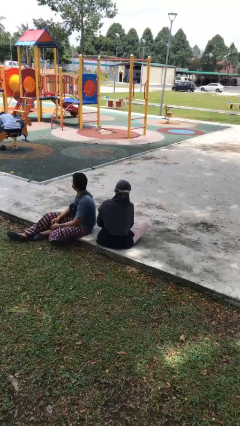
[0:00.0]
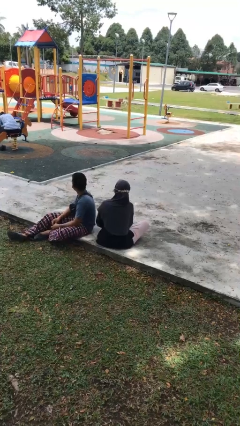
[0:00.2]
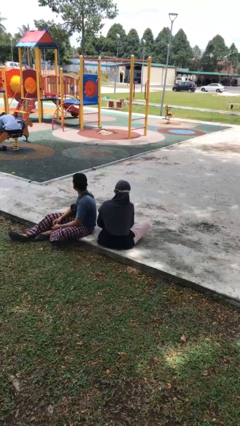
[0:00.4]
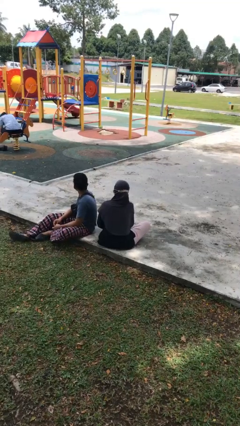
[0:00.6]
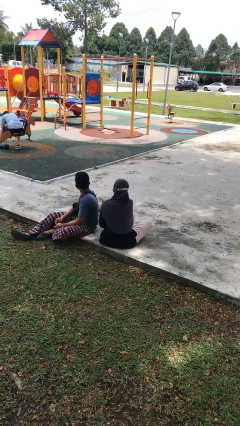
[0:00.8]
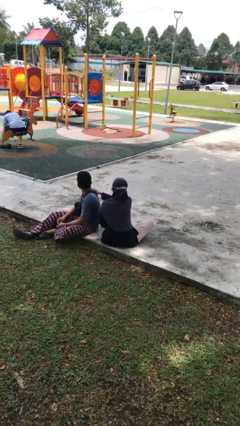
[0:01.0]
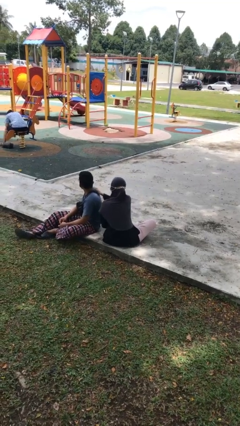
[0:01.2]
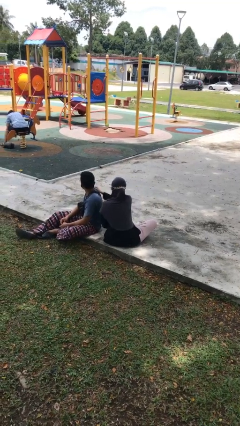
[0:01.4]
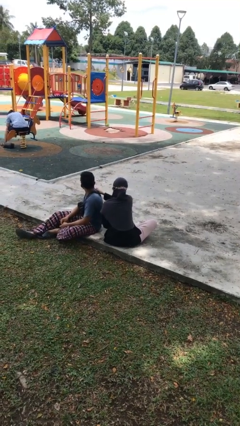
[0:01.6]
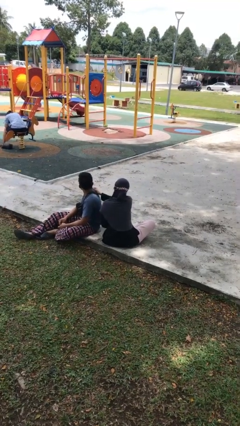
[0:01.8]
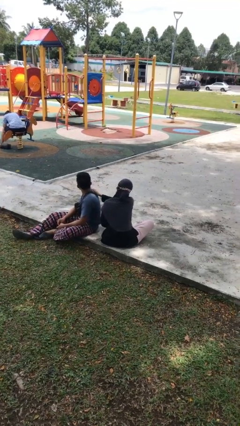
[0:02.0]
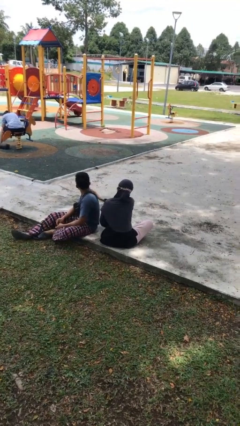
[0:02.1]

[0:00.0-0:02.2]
person pounds shoulders of person

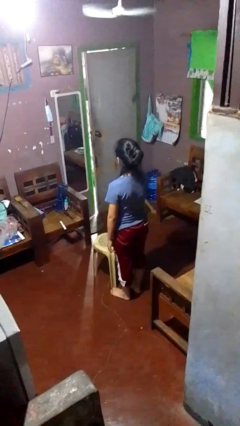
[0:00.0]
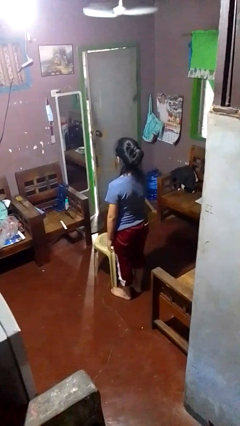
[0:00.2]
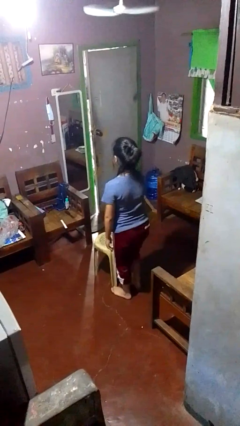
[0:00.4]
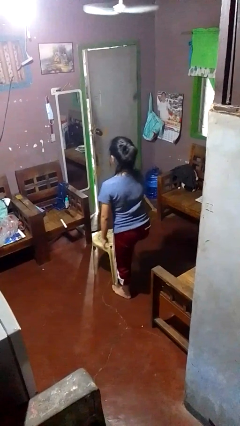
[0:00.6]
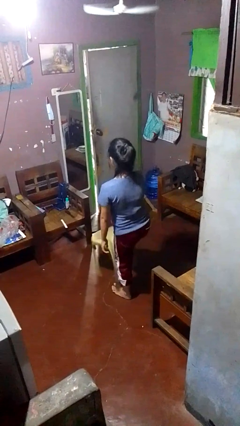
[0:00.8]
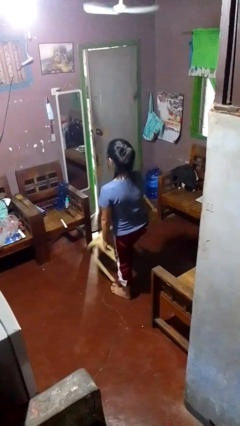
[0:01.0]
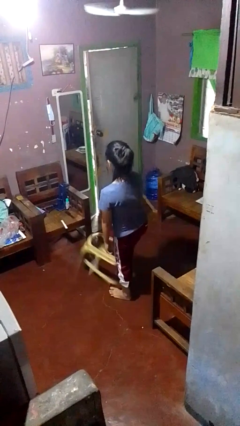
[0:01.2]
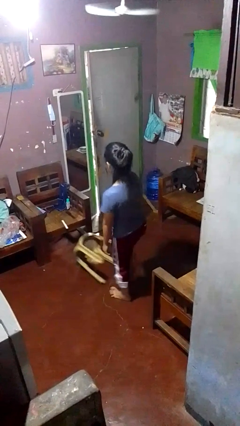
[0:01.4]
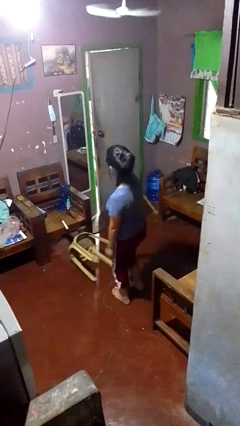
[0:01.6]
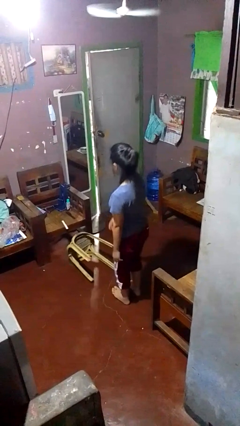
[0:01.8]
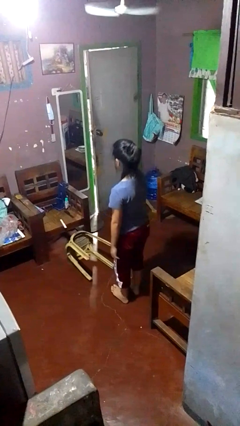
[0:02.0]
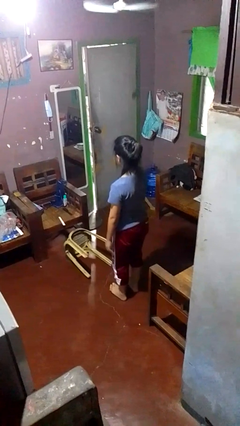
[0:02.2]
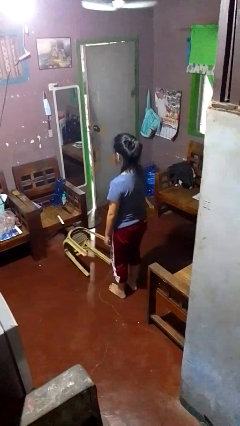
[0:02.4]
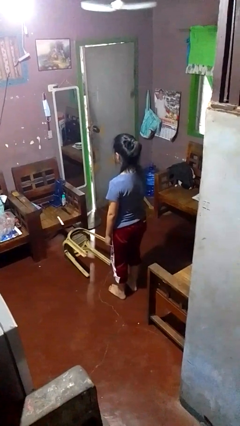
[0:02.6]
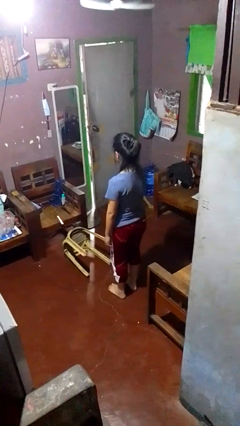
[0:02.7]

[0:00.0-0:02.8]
person knocks over furniture

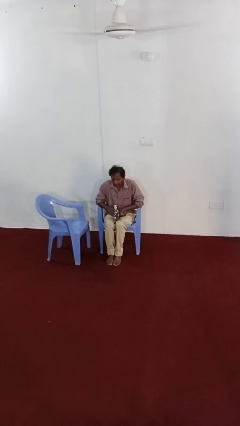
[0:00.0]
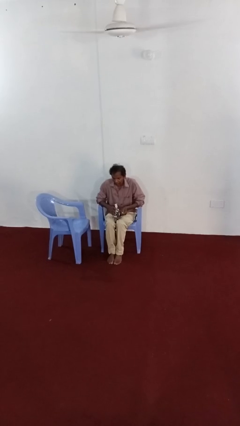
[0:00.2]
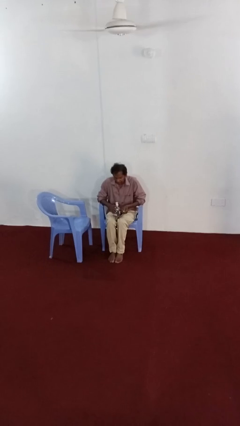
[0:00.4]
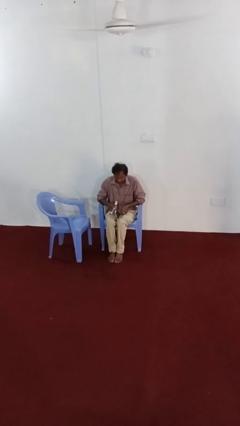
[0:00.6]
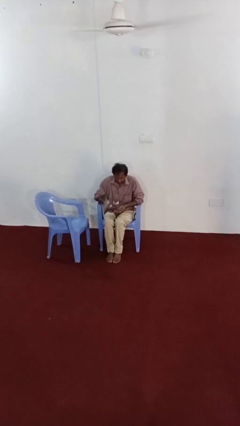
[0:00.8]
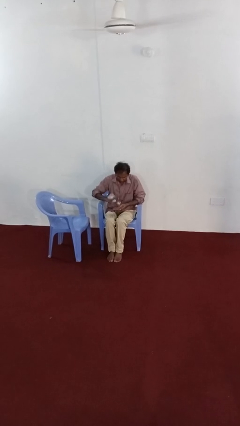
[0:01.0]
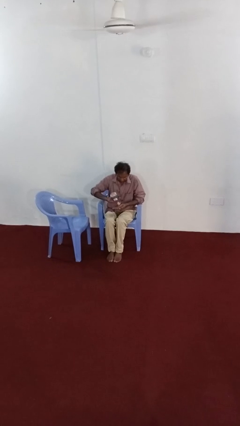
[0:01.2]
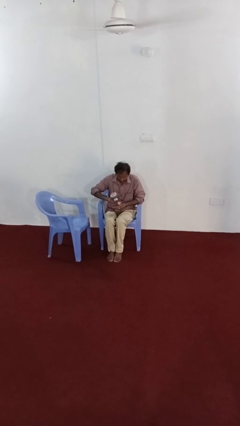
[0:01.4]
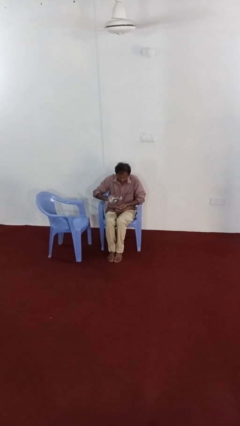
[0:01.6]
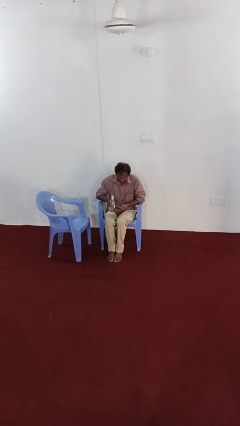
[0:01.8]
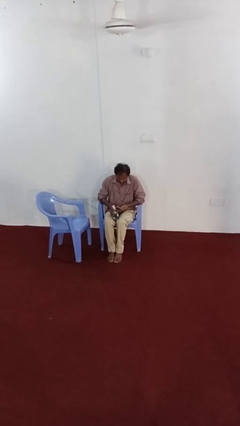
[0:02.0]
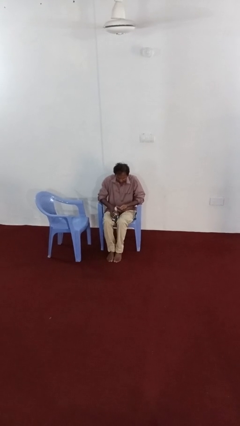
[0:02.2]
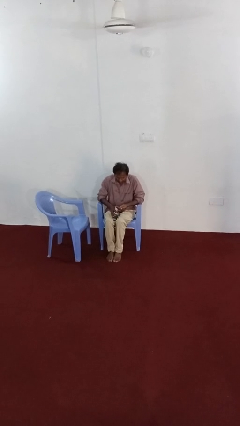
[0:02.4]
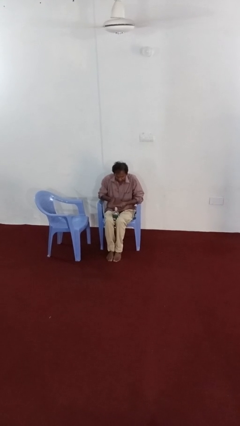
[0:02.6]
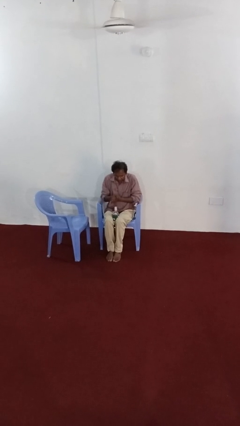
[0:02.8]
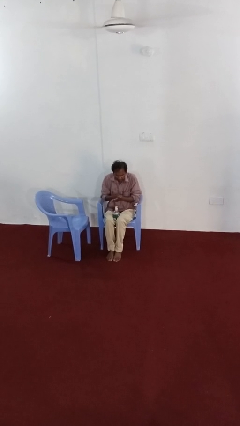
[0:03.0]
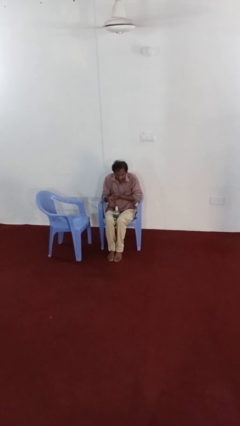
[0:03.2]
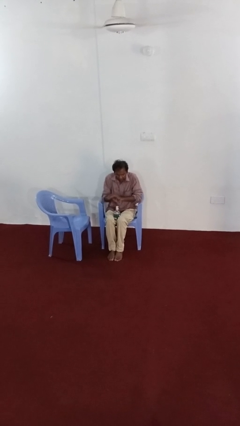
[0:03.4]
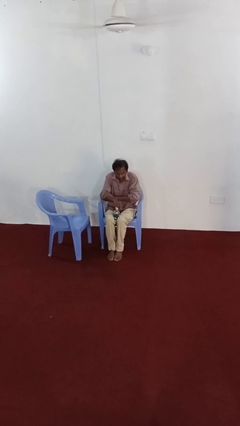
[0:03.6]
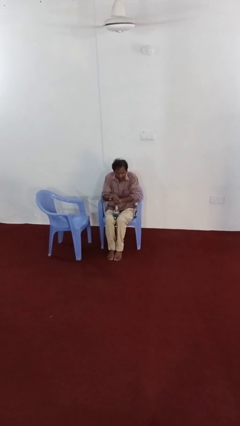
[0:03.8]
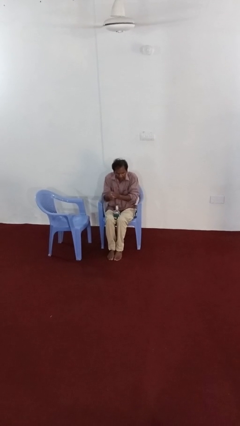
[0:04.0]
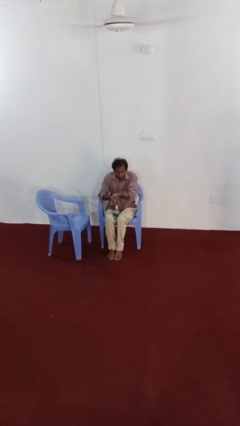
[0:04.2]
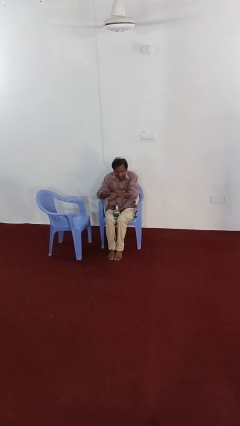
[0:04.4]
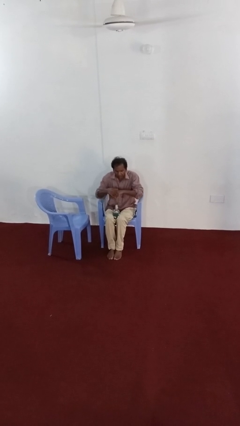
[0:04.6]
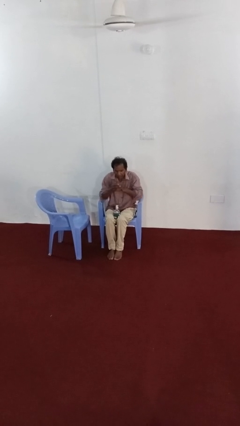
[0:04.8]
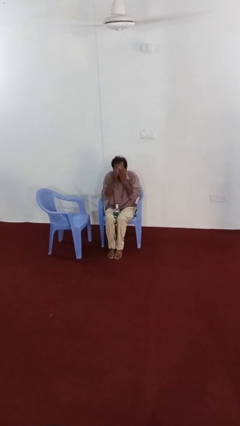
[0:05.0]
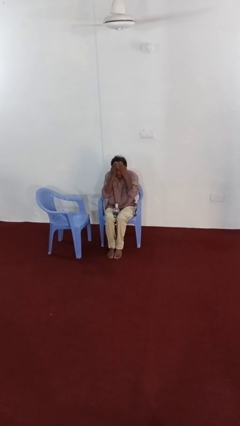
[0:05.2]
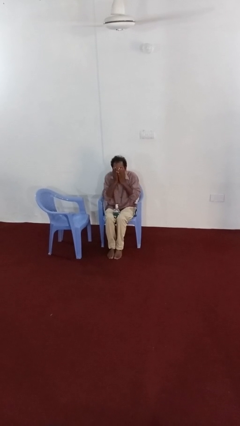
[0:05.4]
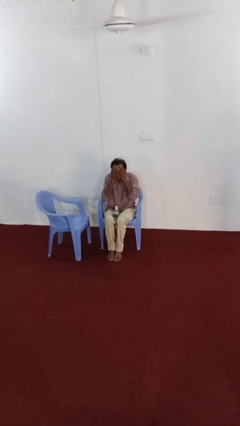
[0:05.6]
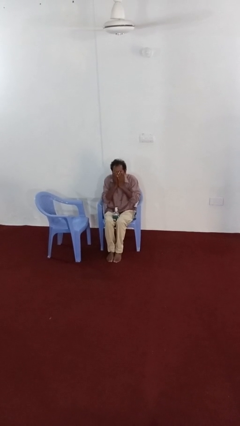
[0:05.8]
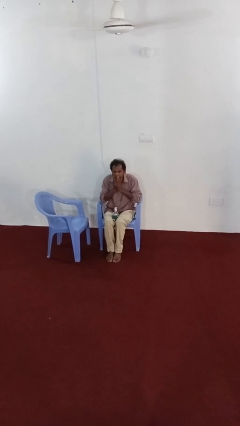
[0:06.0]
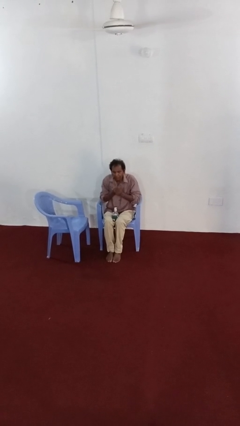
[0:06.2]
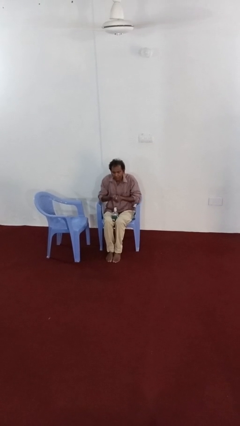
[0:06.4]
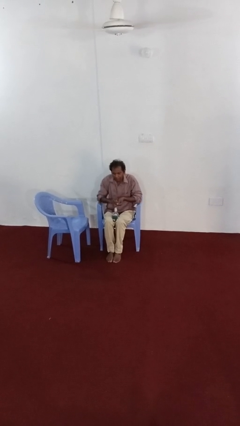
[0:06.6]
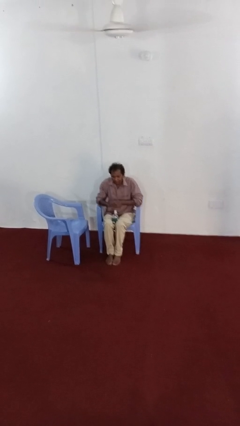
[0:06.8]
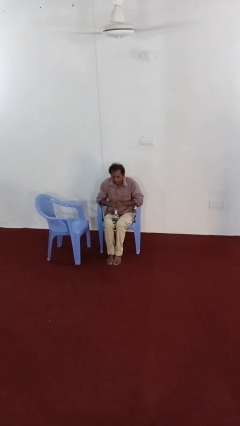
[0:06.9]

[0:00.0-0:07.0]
person applies sunscreen

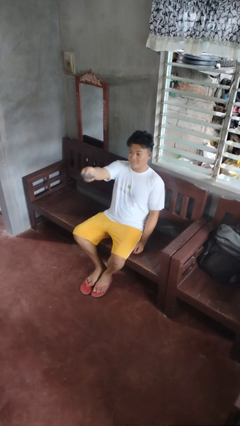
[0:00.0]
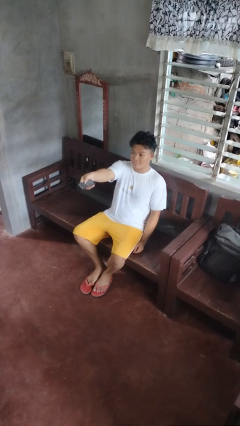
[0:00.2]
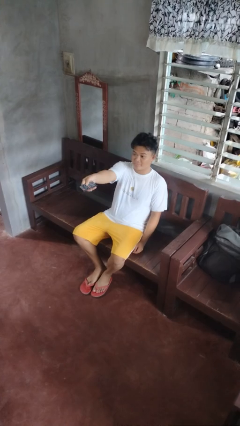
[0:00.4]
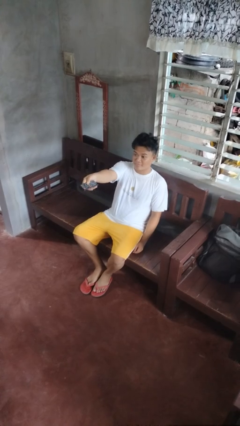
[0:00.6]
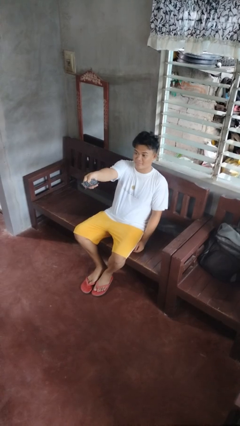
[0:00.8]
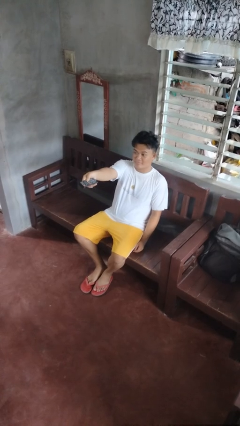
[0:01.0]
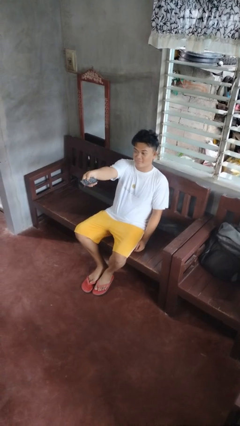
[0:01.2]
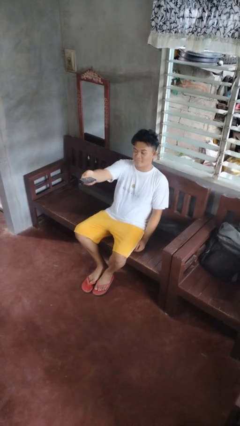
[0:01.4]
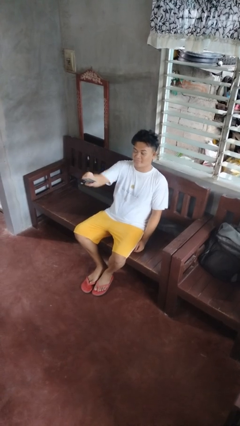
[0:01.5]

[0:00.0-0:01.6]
person uses television remote

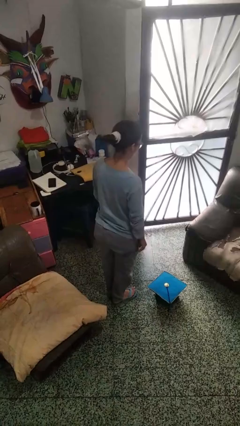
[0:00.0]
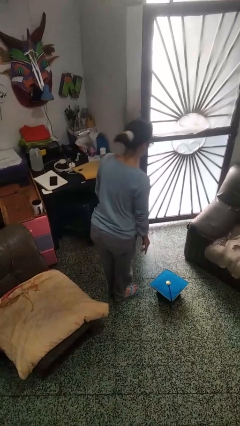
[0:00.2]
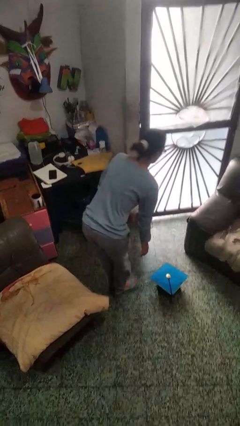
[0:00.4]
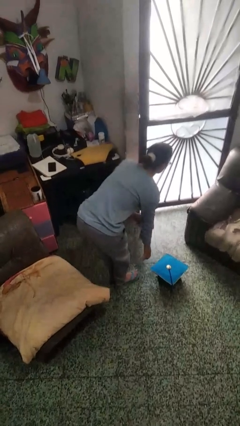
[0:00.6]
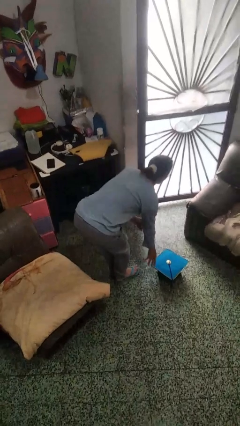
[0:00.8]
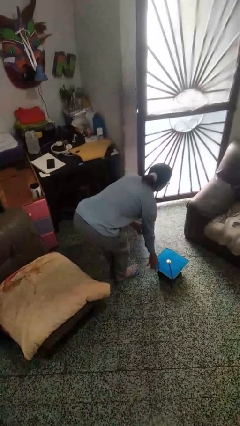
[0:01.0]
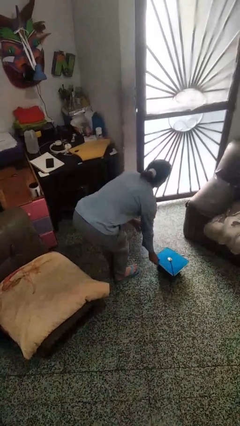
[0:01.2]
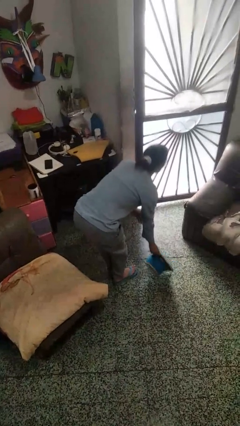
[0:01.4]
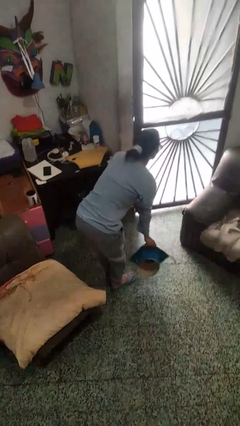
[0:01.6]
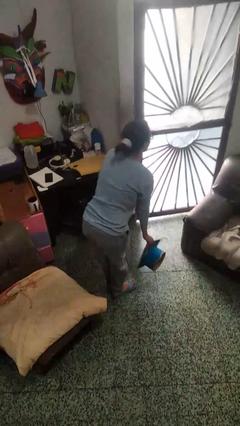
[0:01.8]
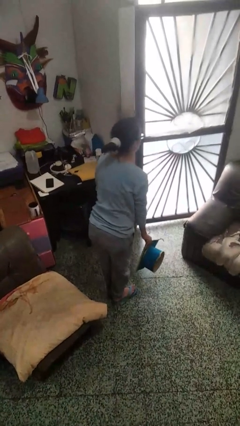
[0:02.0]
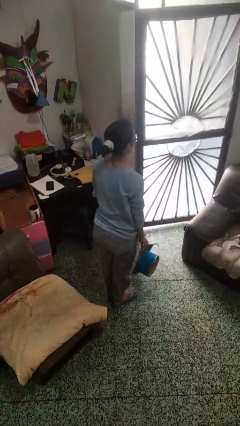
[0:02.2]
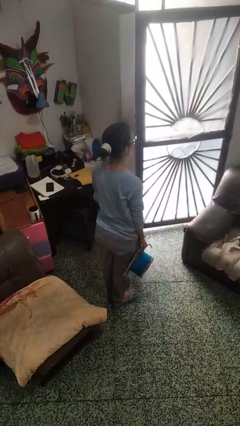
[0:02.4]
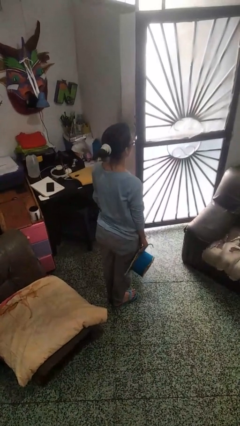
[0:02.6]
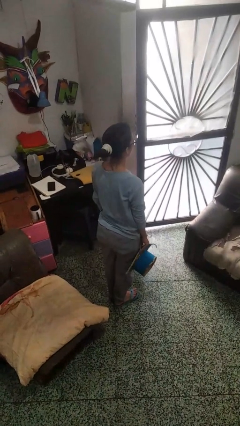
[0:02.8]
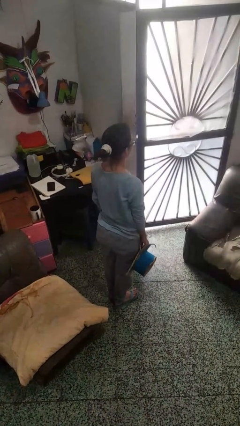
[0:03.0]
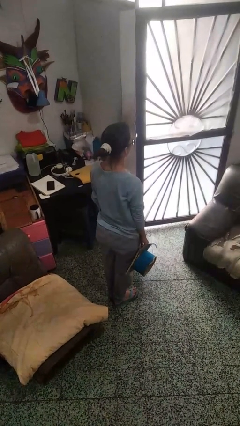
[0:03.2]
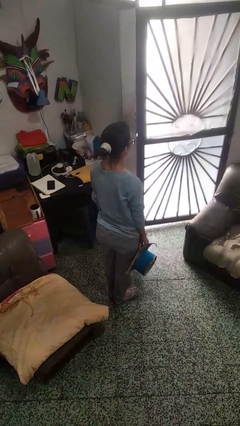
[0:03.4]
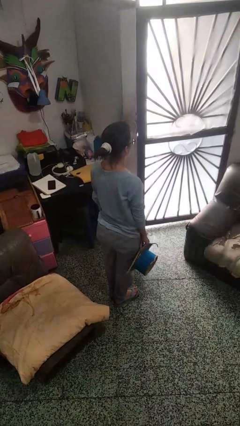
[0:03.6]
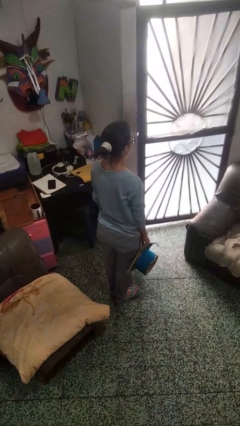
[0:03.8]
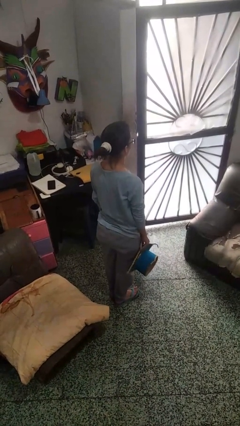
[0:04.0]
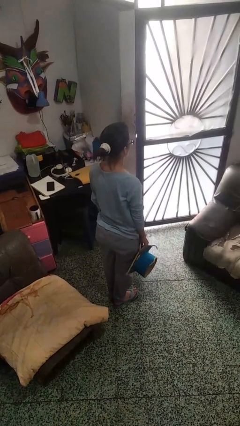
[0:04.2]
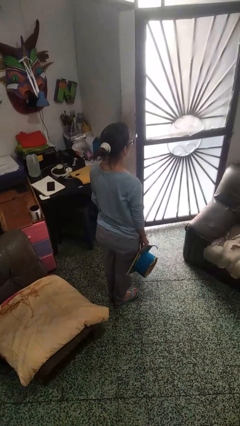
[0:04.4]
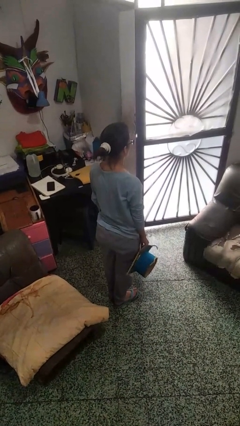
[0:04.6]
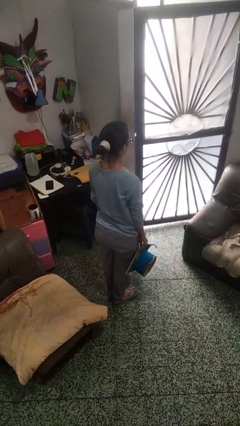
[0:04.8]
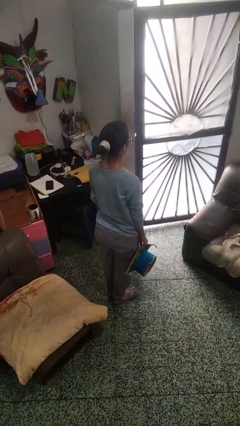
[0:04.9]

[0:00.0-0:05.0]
person picks up object from floor
